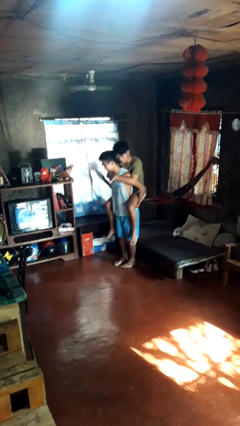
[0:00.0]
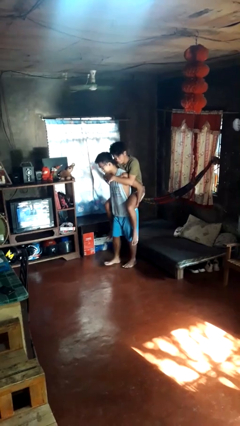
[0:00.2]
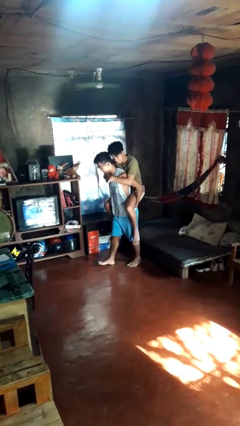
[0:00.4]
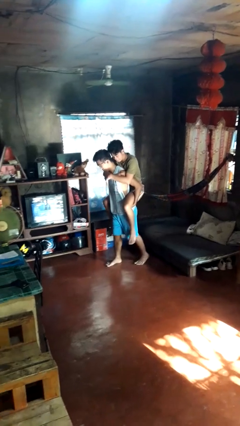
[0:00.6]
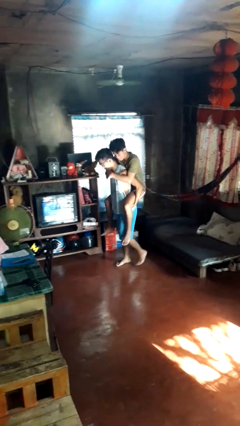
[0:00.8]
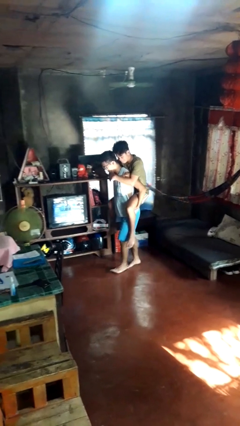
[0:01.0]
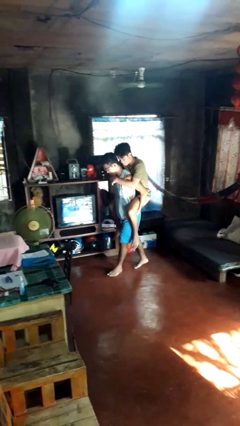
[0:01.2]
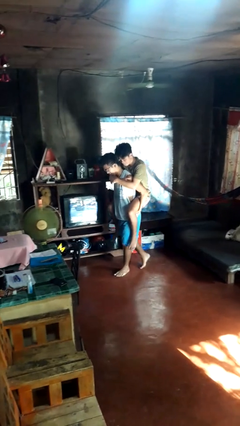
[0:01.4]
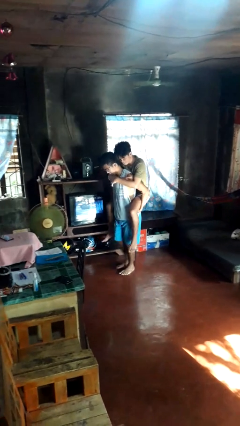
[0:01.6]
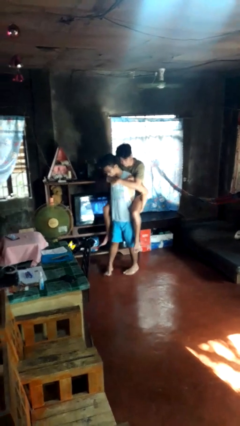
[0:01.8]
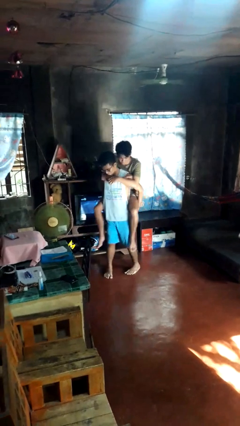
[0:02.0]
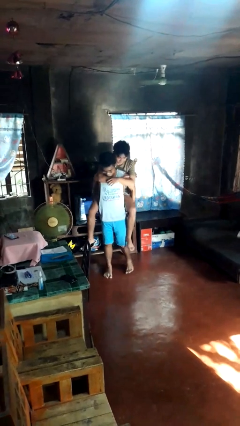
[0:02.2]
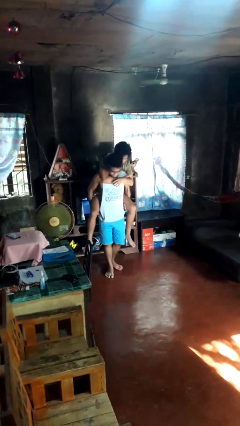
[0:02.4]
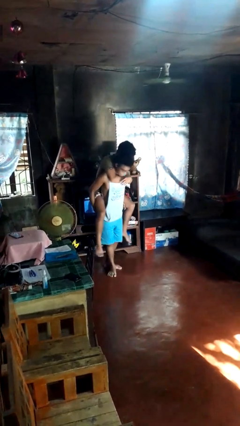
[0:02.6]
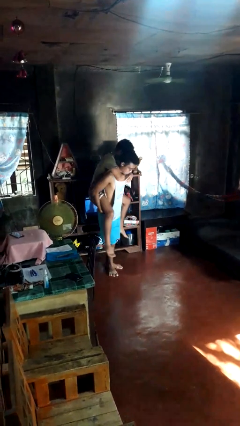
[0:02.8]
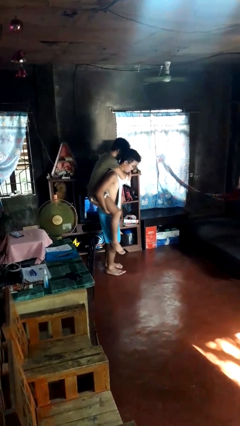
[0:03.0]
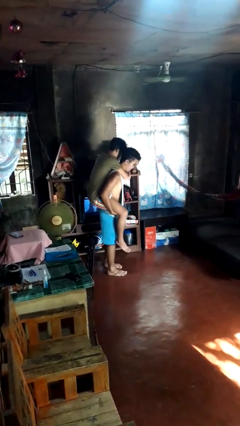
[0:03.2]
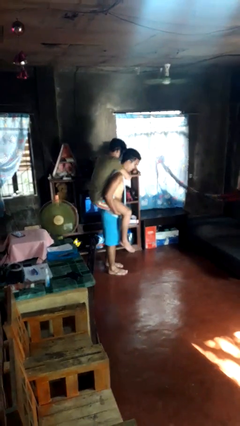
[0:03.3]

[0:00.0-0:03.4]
person carries person on back

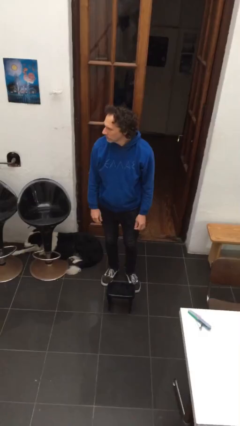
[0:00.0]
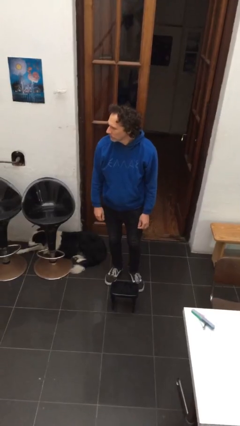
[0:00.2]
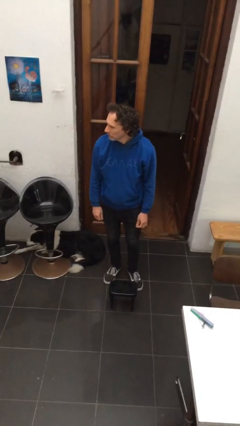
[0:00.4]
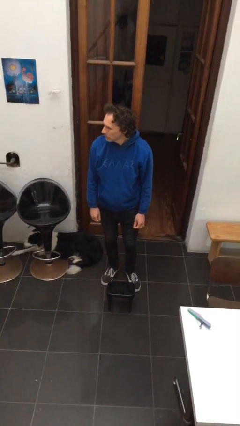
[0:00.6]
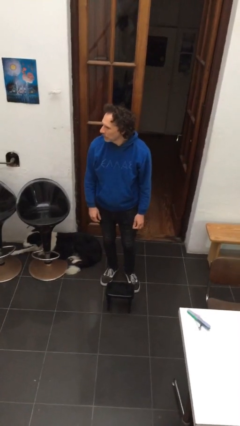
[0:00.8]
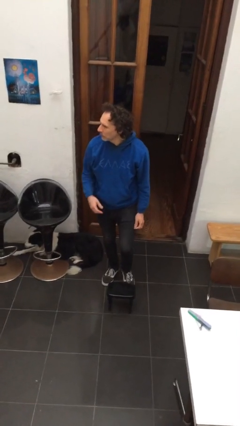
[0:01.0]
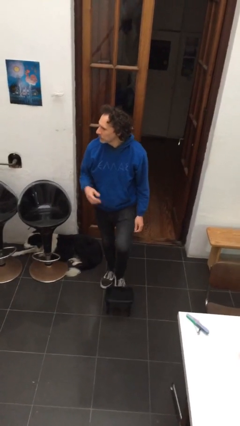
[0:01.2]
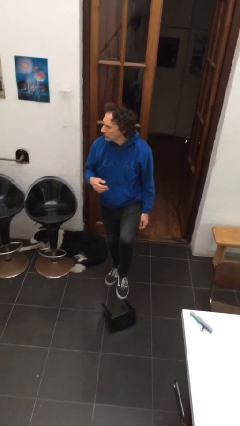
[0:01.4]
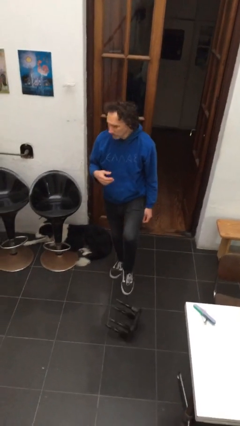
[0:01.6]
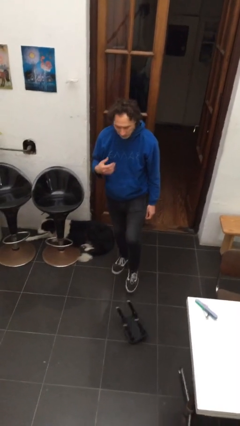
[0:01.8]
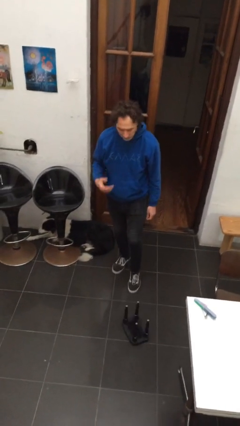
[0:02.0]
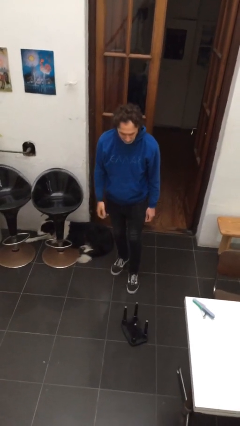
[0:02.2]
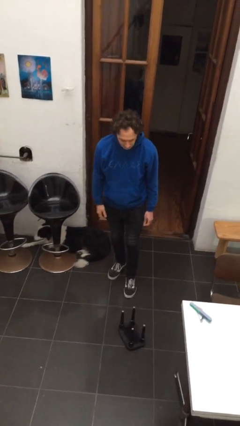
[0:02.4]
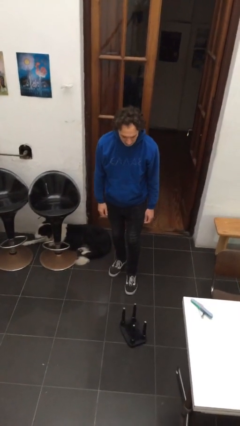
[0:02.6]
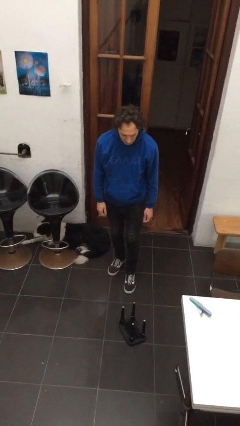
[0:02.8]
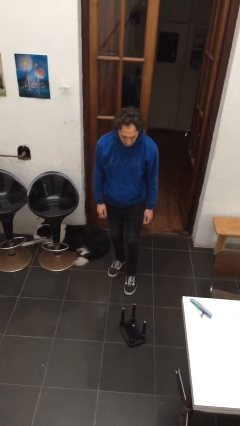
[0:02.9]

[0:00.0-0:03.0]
person knocks over furniture

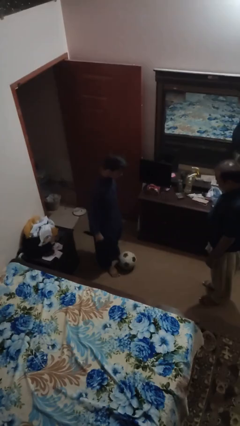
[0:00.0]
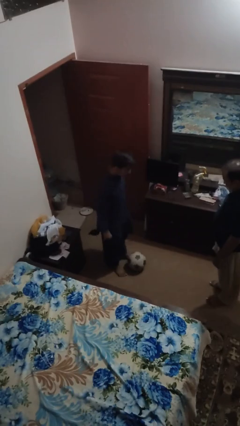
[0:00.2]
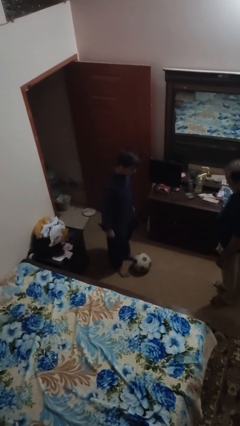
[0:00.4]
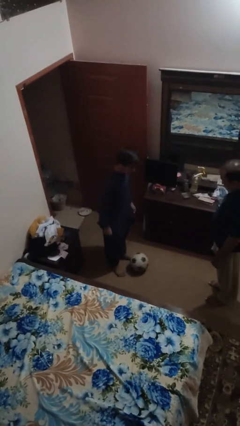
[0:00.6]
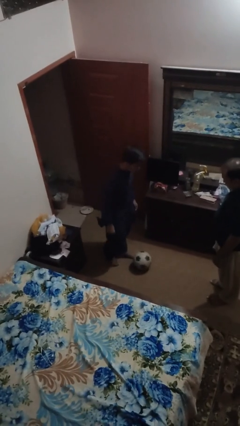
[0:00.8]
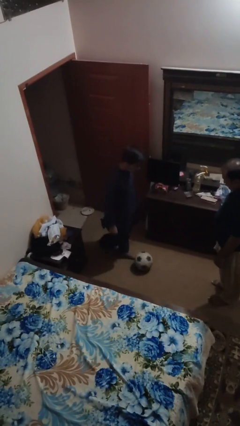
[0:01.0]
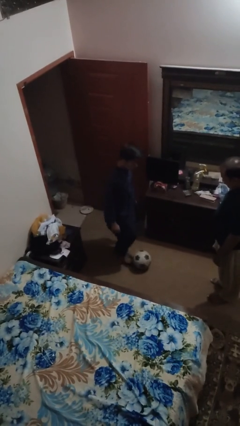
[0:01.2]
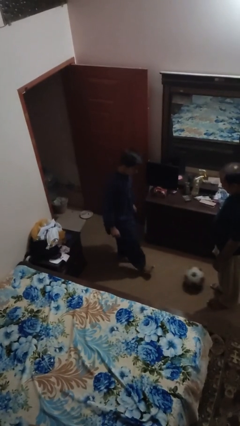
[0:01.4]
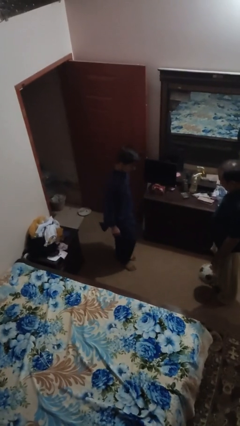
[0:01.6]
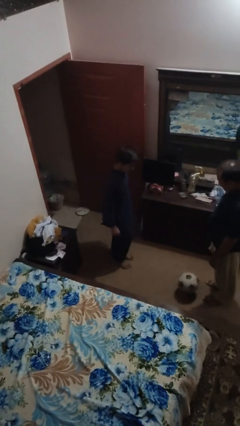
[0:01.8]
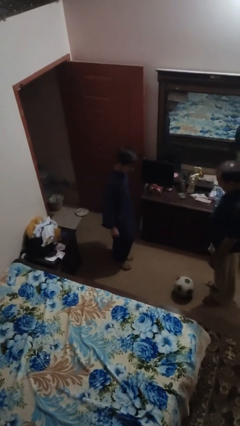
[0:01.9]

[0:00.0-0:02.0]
person kicks object to person

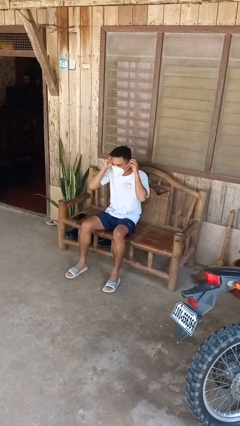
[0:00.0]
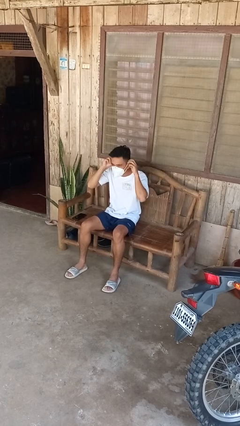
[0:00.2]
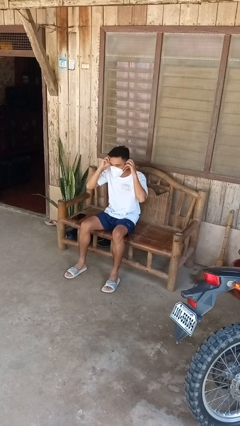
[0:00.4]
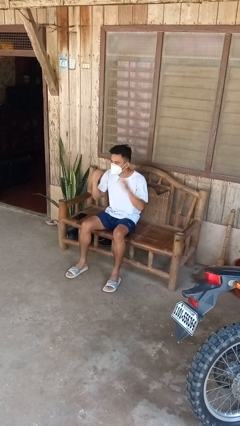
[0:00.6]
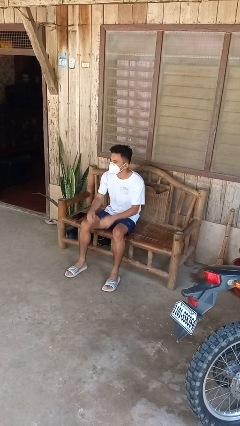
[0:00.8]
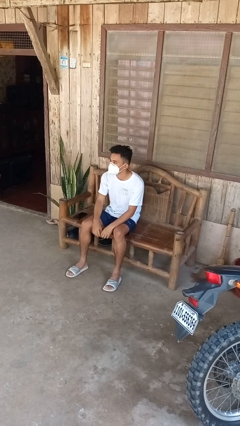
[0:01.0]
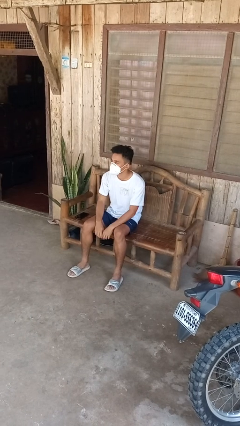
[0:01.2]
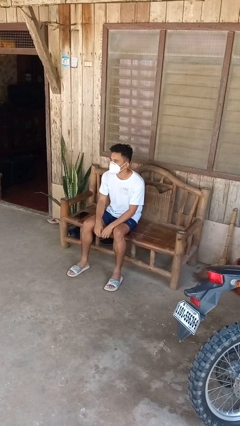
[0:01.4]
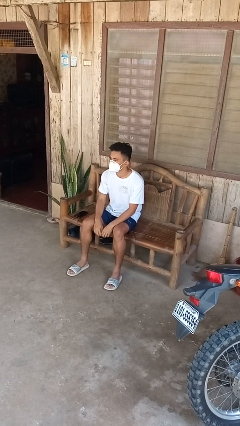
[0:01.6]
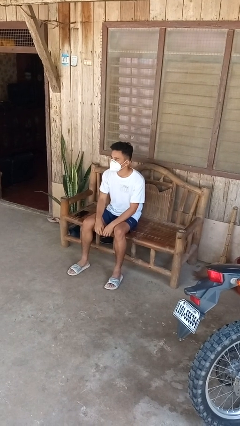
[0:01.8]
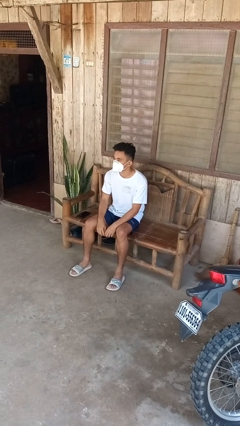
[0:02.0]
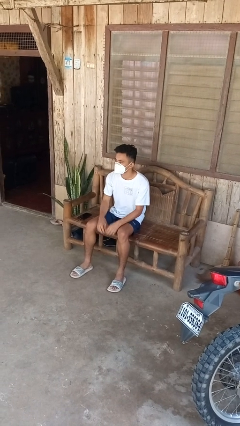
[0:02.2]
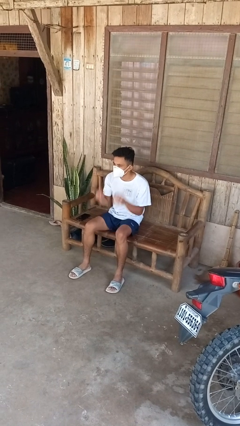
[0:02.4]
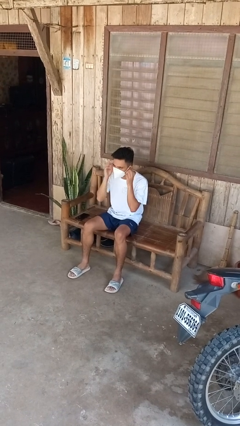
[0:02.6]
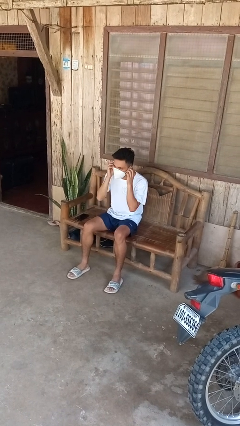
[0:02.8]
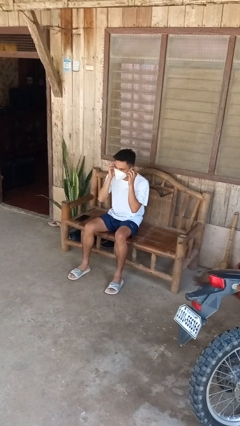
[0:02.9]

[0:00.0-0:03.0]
person puts on facemask

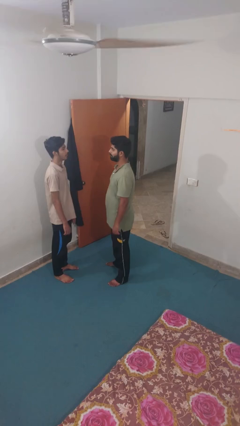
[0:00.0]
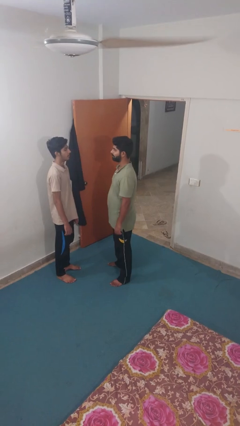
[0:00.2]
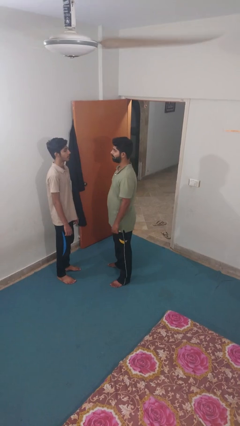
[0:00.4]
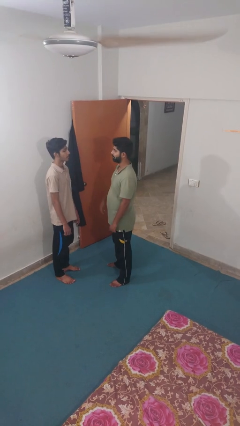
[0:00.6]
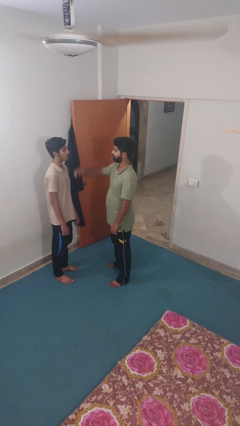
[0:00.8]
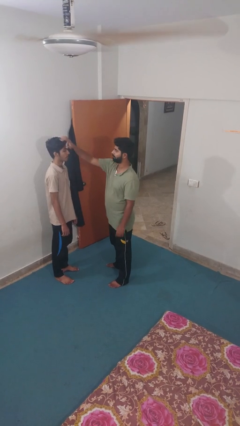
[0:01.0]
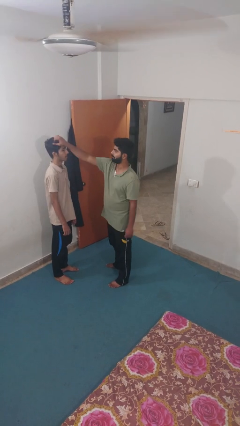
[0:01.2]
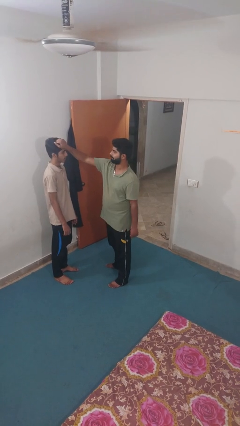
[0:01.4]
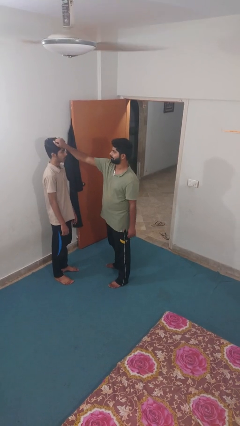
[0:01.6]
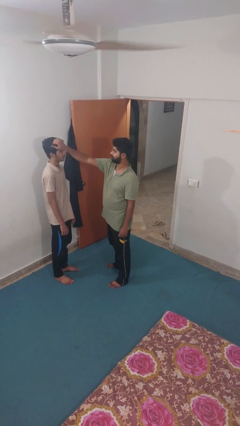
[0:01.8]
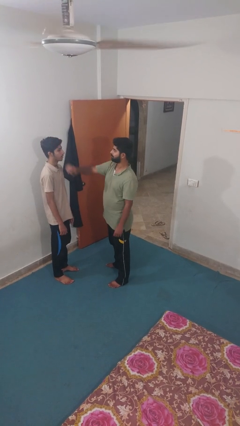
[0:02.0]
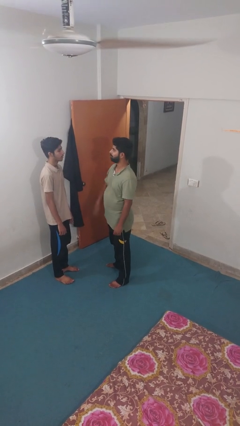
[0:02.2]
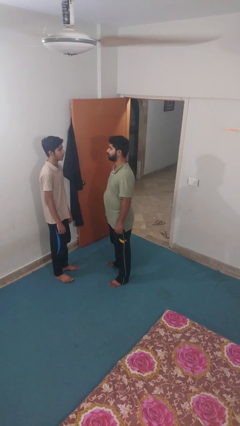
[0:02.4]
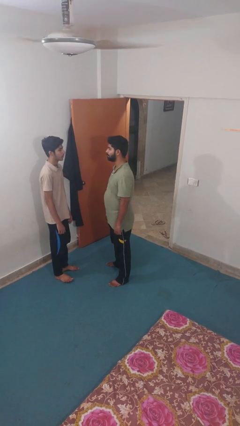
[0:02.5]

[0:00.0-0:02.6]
person grabs person by hair

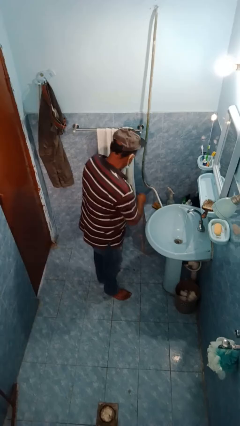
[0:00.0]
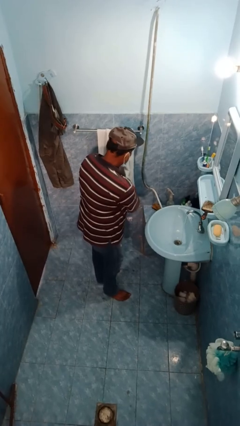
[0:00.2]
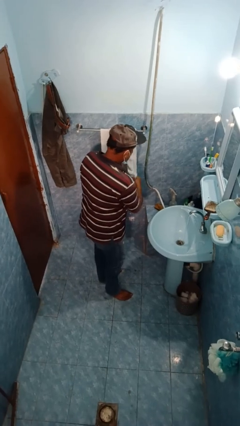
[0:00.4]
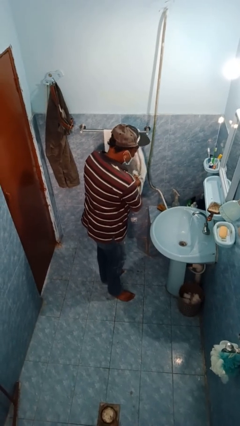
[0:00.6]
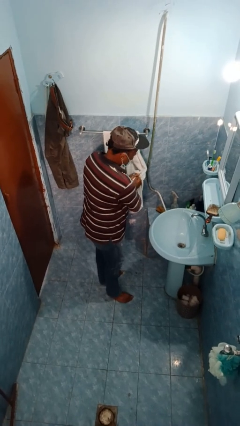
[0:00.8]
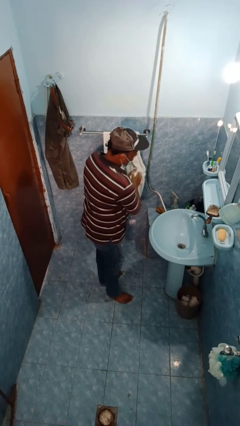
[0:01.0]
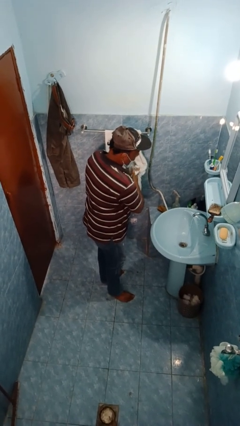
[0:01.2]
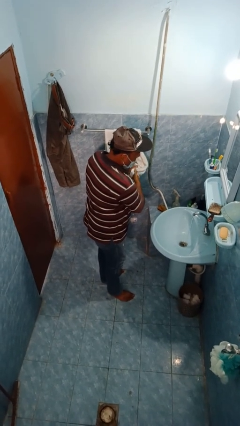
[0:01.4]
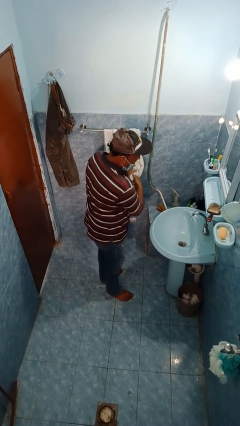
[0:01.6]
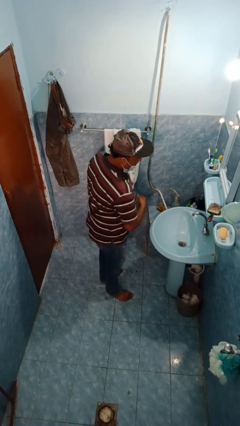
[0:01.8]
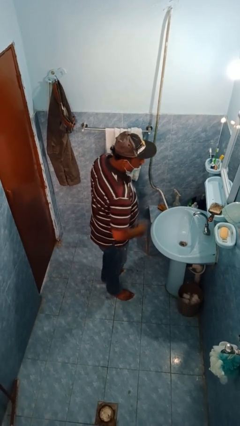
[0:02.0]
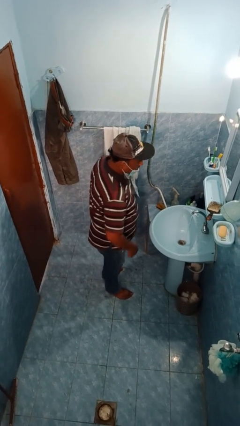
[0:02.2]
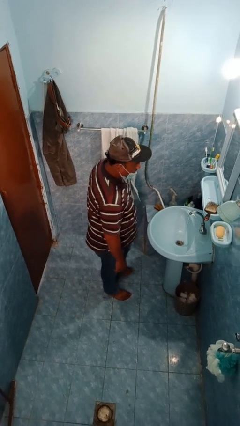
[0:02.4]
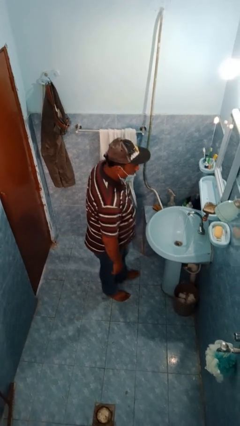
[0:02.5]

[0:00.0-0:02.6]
person dries hands with towel

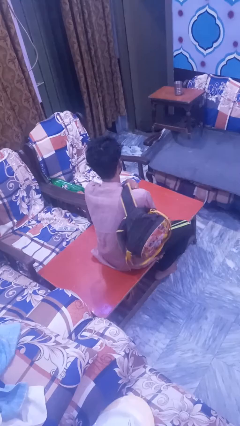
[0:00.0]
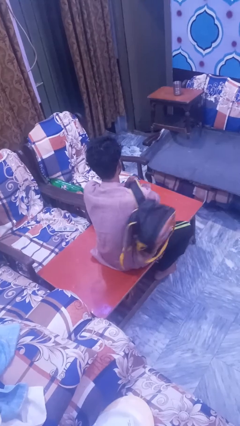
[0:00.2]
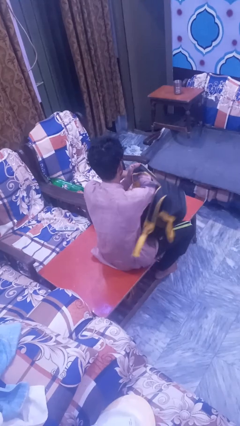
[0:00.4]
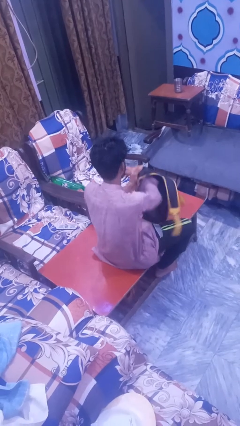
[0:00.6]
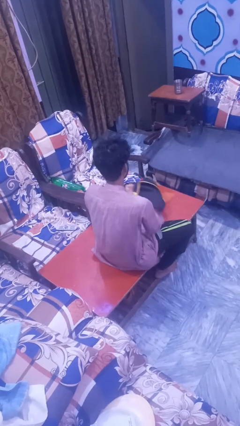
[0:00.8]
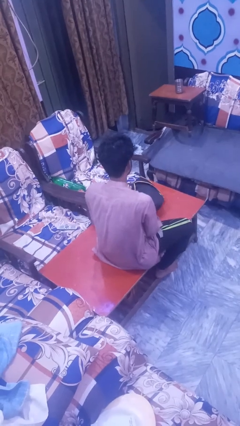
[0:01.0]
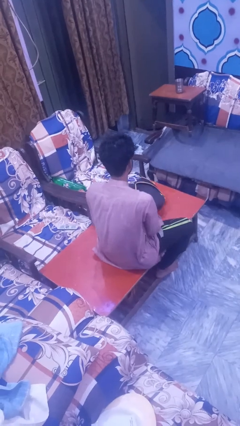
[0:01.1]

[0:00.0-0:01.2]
person takes off backpack
